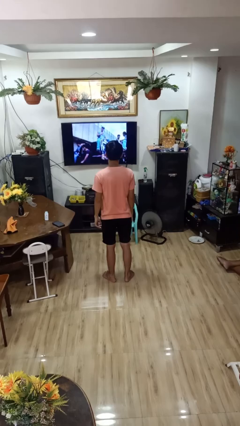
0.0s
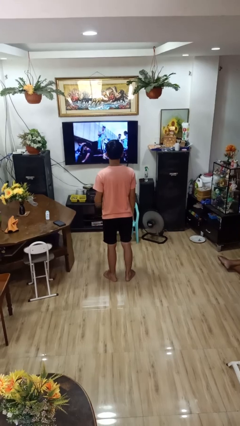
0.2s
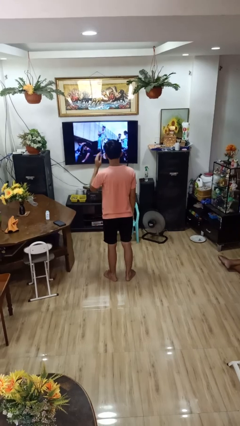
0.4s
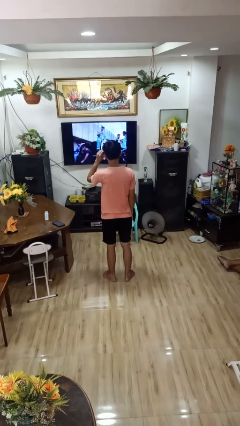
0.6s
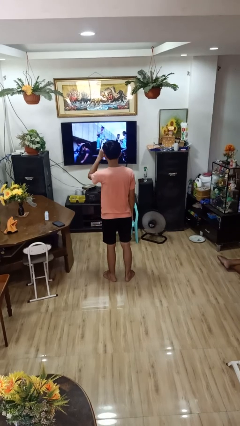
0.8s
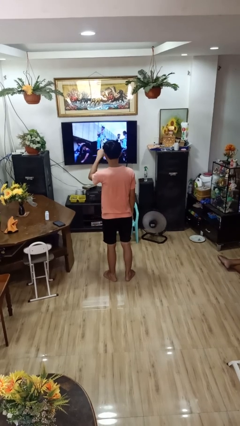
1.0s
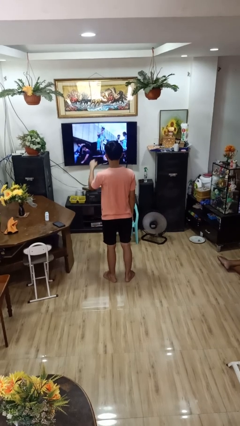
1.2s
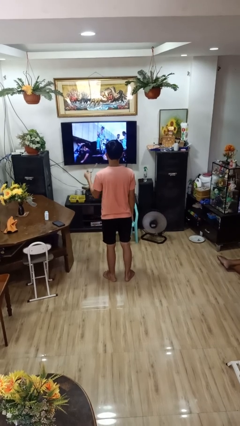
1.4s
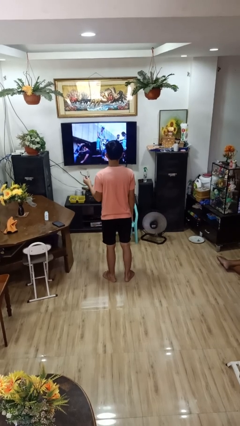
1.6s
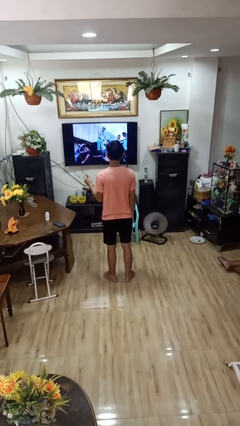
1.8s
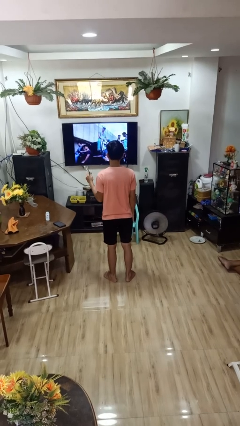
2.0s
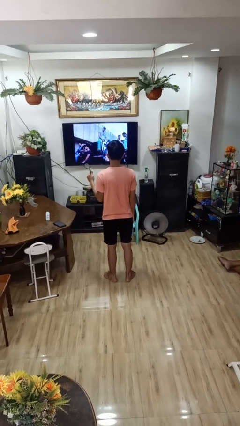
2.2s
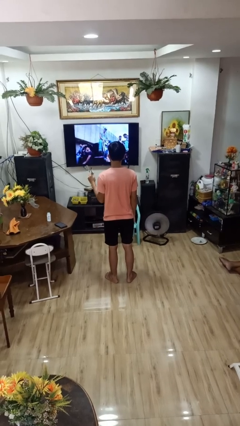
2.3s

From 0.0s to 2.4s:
person takes off glasses

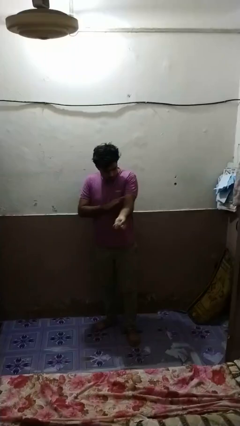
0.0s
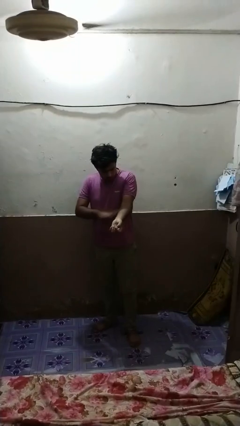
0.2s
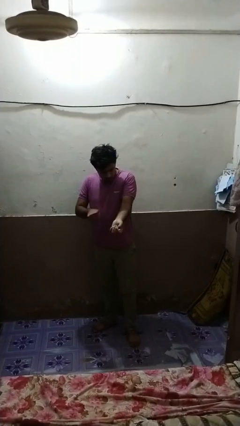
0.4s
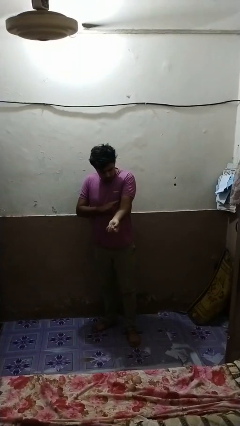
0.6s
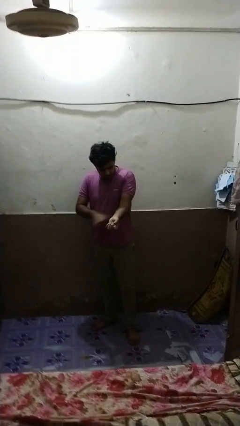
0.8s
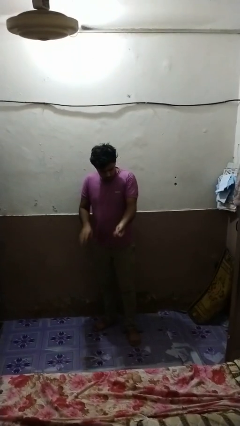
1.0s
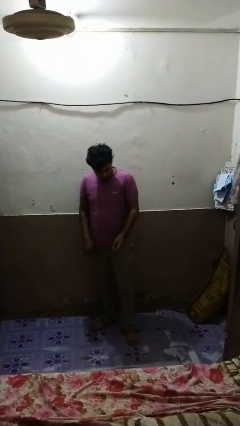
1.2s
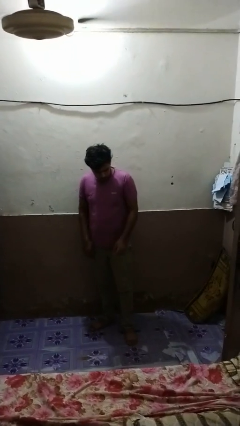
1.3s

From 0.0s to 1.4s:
person swats bug

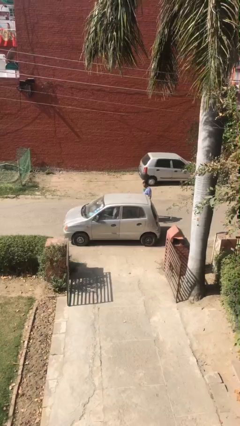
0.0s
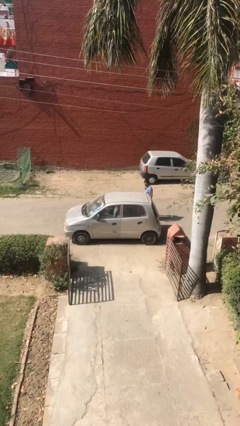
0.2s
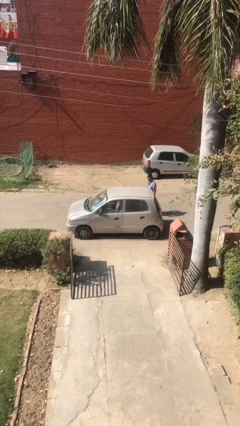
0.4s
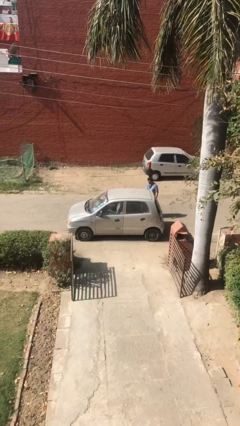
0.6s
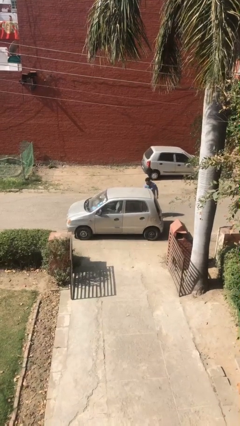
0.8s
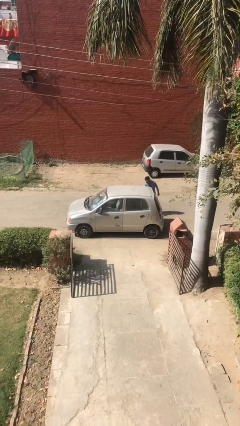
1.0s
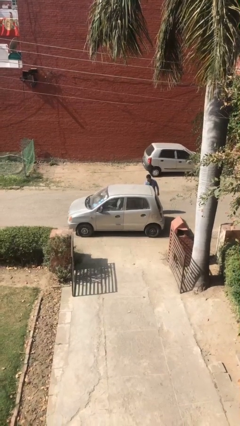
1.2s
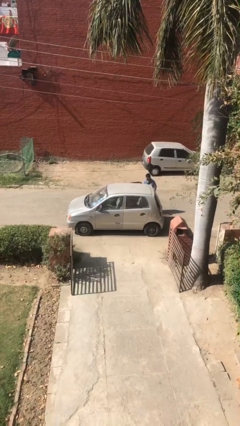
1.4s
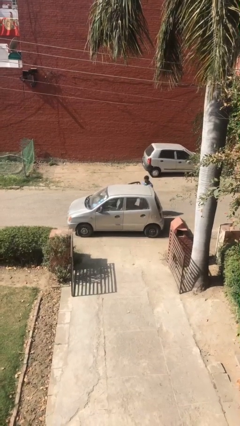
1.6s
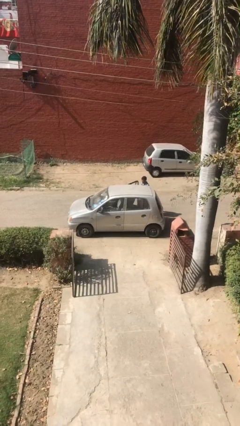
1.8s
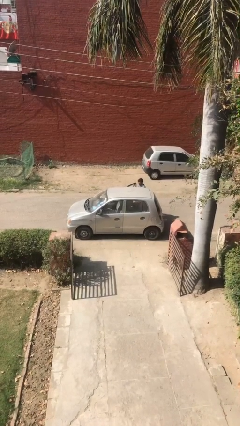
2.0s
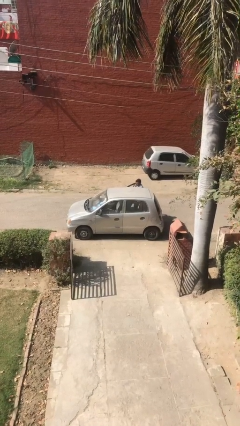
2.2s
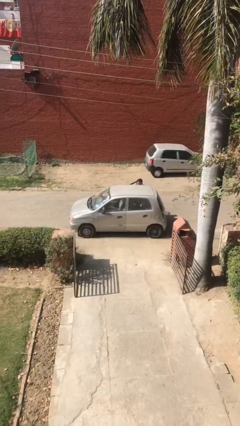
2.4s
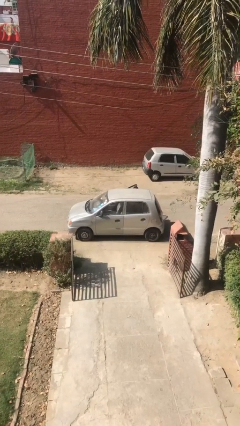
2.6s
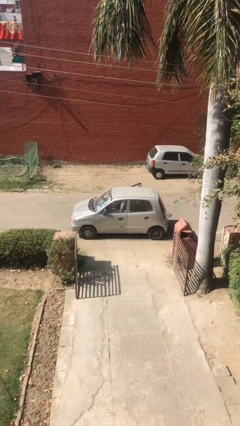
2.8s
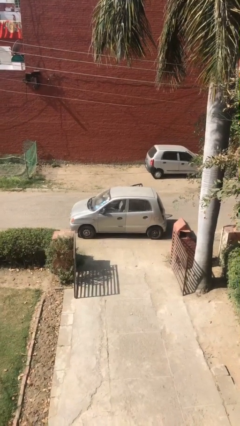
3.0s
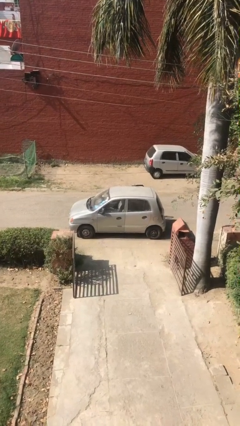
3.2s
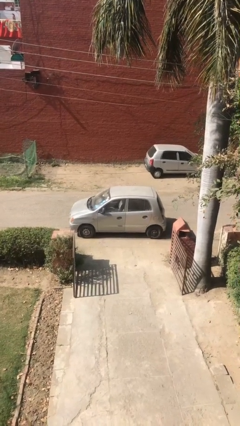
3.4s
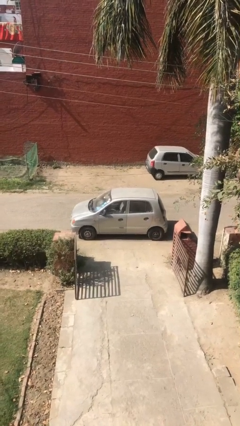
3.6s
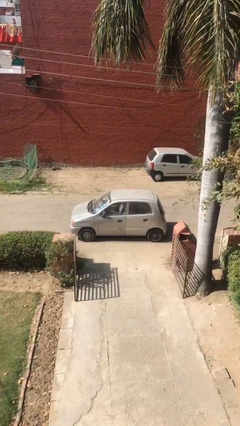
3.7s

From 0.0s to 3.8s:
car picks up person

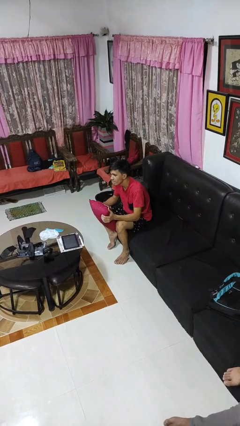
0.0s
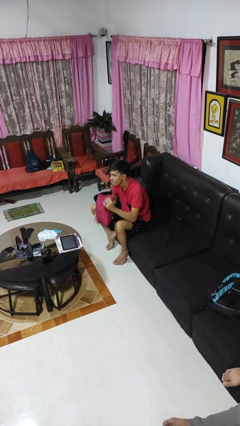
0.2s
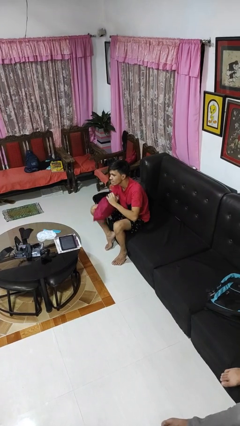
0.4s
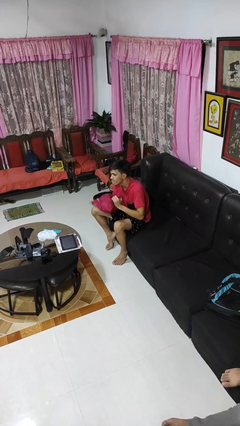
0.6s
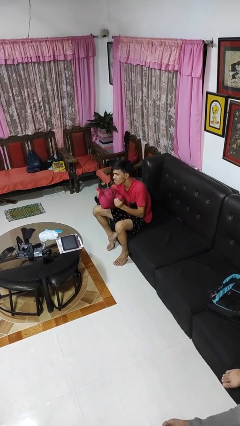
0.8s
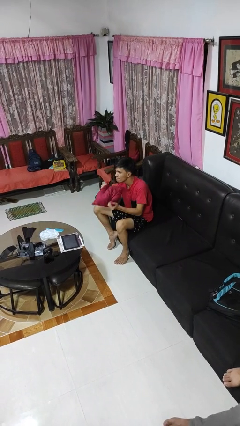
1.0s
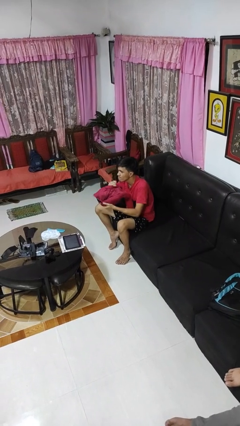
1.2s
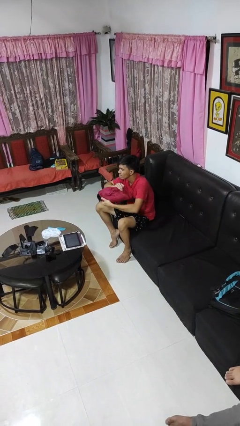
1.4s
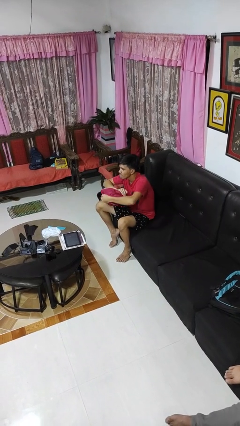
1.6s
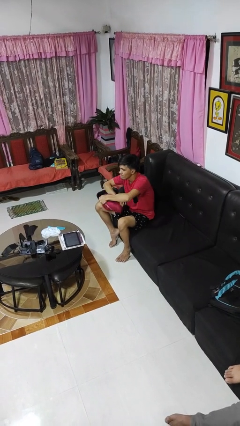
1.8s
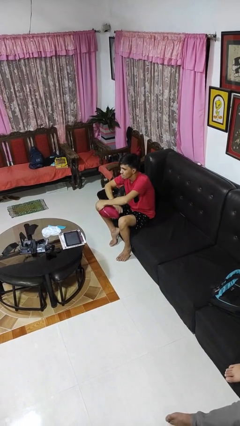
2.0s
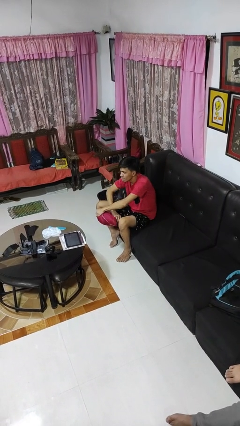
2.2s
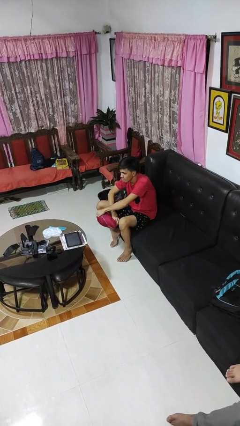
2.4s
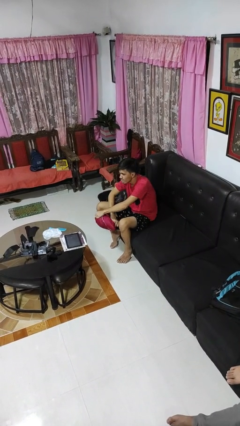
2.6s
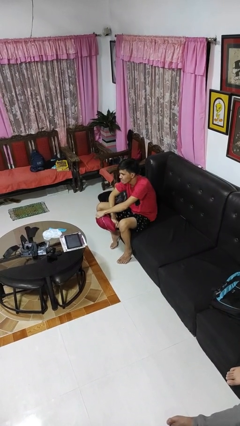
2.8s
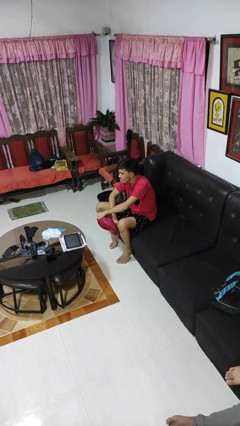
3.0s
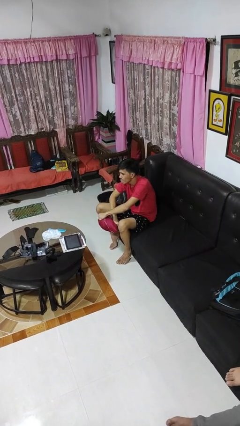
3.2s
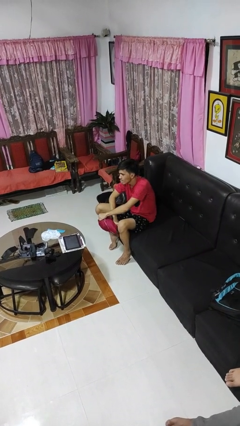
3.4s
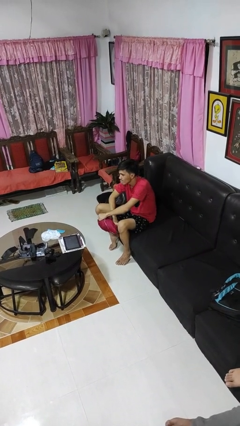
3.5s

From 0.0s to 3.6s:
person squeezes object

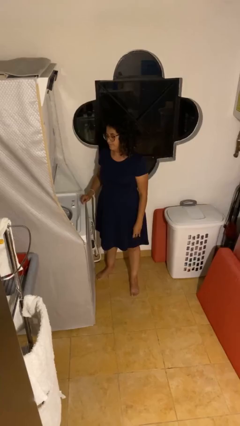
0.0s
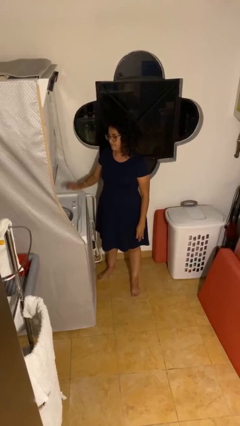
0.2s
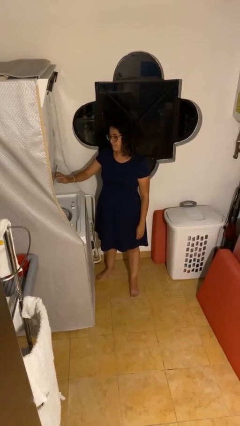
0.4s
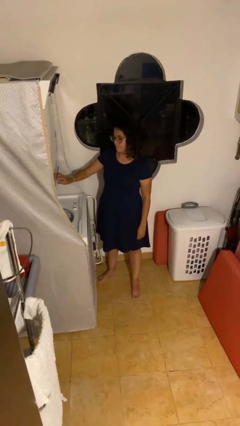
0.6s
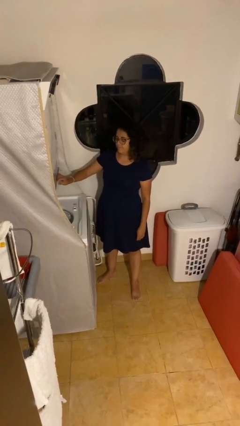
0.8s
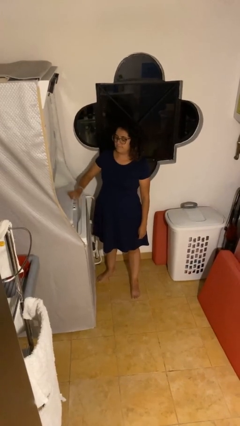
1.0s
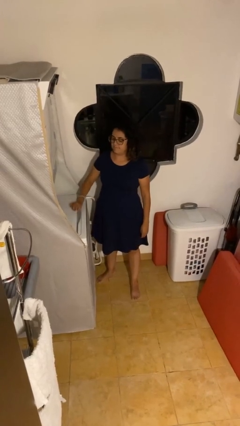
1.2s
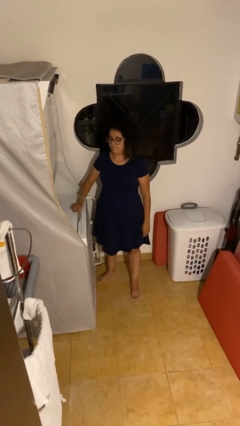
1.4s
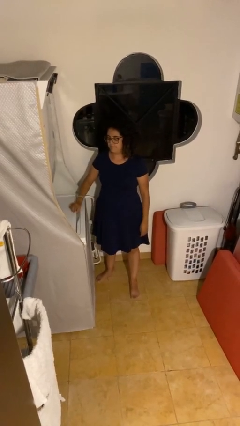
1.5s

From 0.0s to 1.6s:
person closes clothes washer

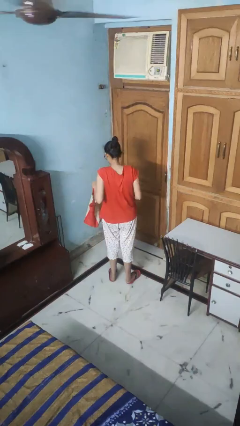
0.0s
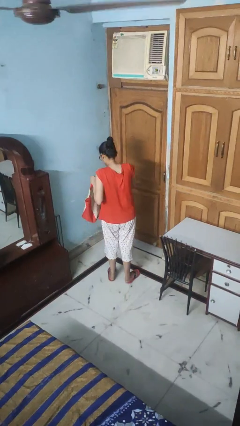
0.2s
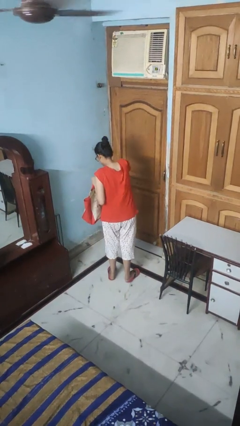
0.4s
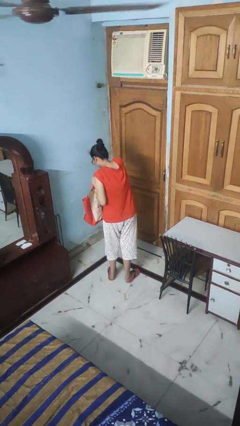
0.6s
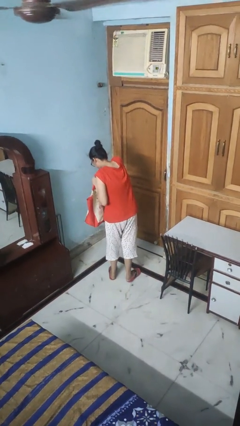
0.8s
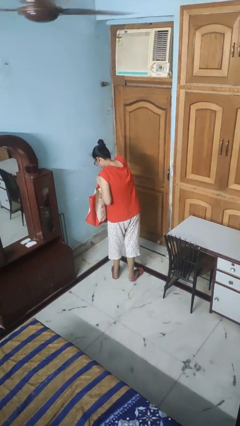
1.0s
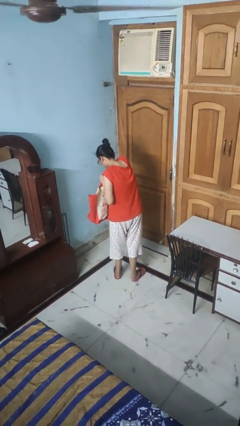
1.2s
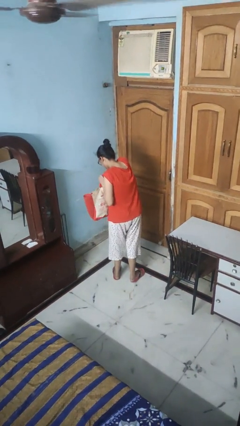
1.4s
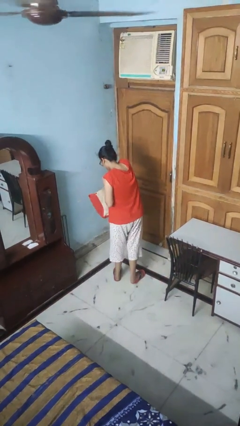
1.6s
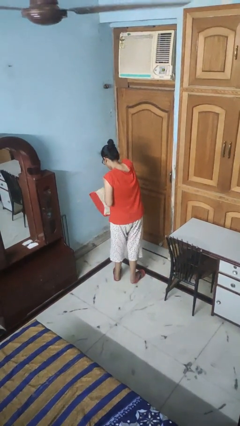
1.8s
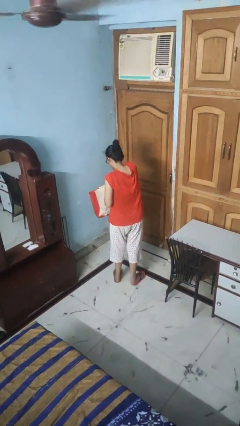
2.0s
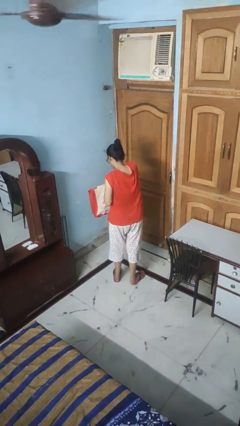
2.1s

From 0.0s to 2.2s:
person searches in bag

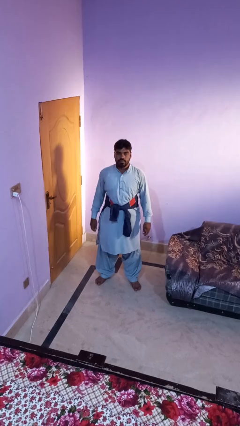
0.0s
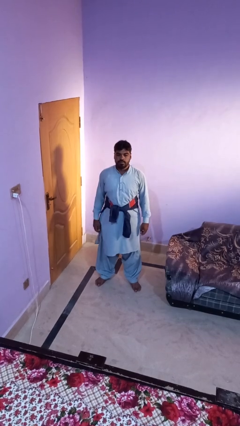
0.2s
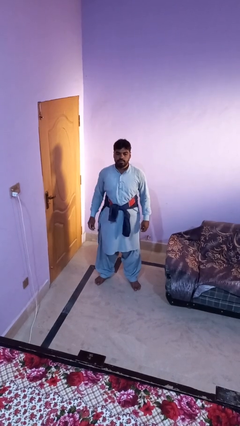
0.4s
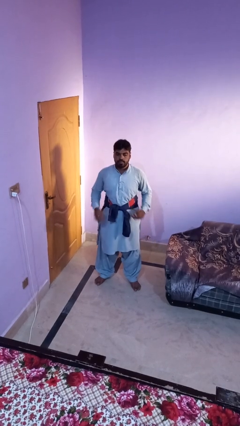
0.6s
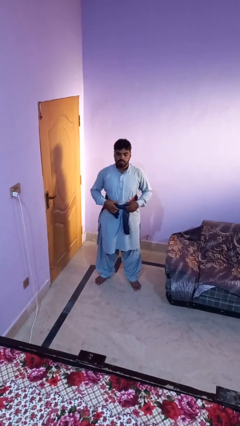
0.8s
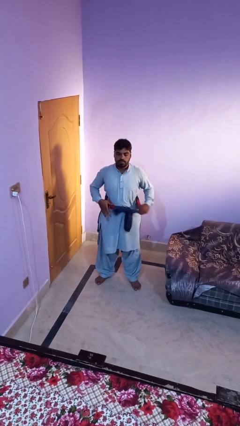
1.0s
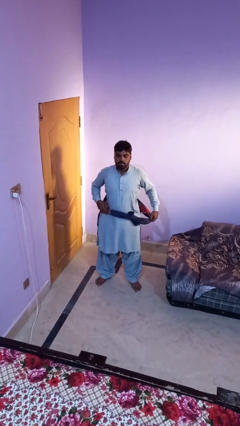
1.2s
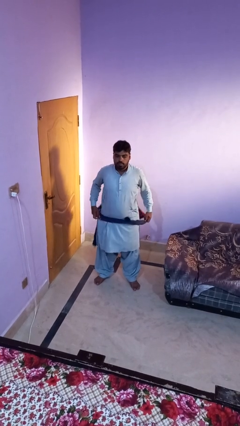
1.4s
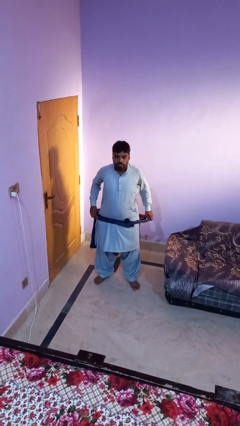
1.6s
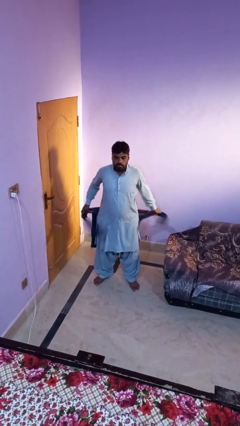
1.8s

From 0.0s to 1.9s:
person unties jacket around waist
